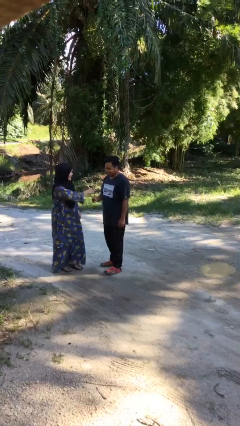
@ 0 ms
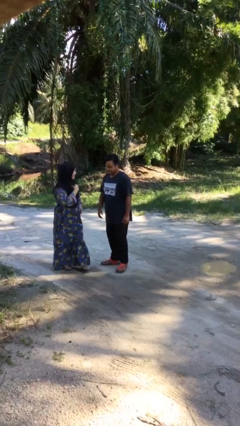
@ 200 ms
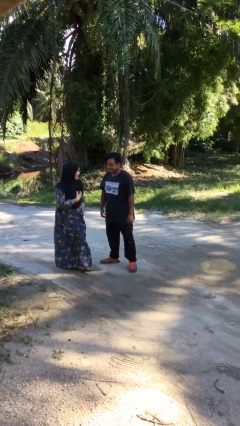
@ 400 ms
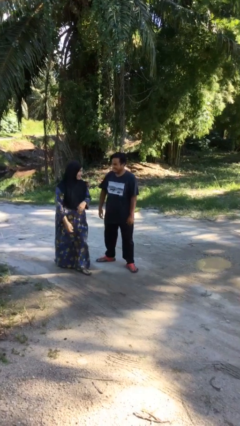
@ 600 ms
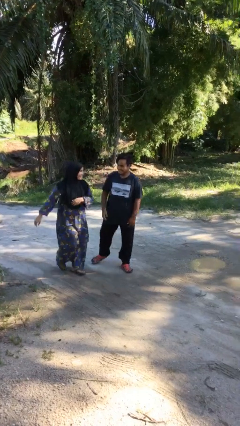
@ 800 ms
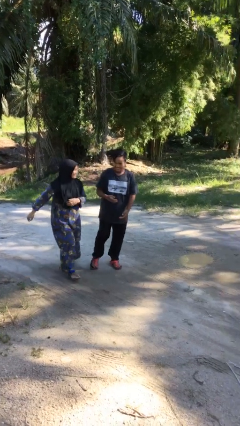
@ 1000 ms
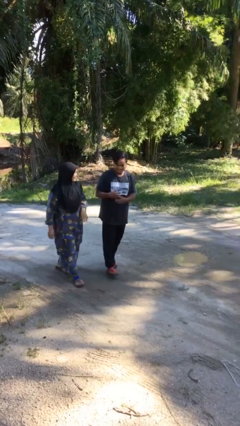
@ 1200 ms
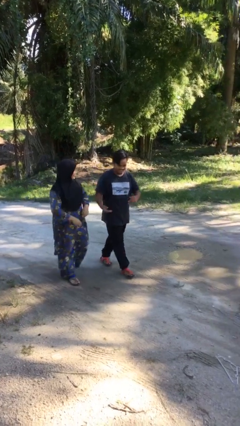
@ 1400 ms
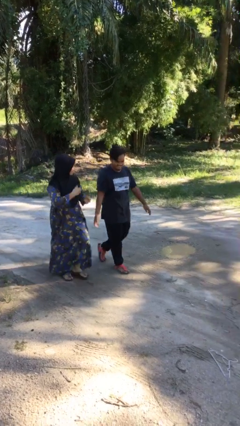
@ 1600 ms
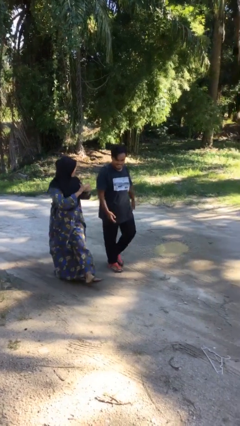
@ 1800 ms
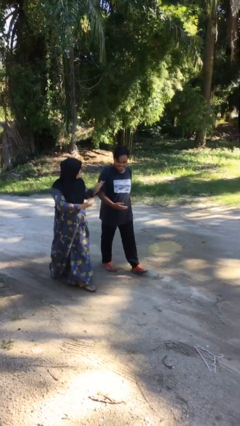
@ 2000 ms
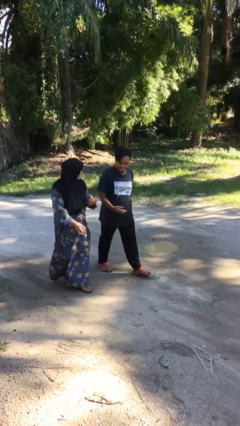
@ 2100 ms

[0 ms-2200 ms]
person talks to person

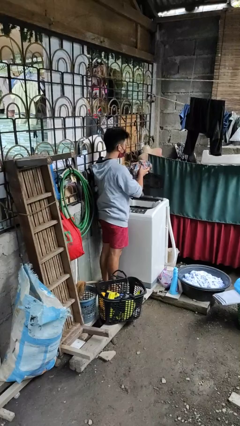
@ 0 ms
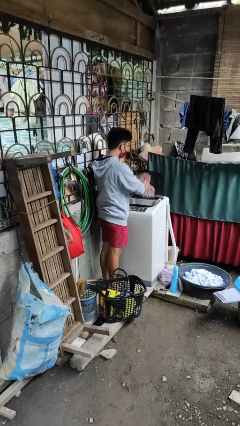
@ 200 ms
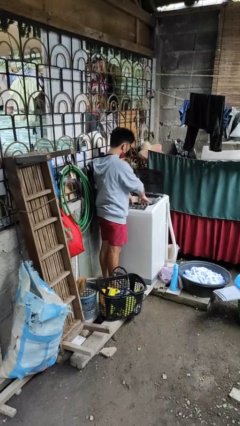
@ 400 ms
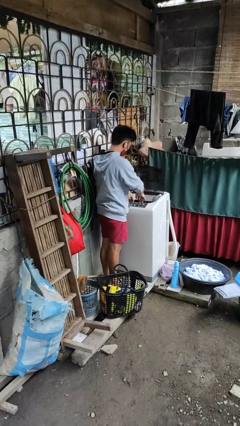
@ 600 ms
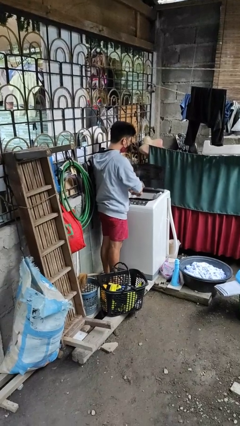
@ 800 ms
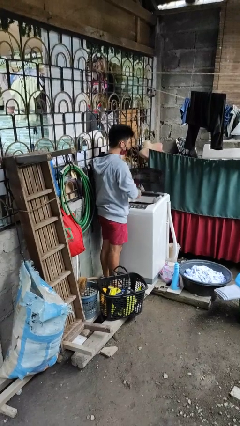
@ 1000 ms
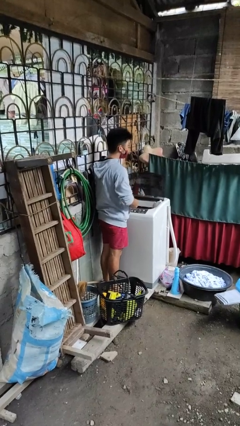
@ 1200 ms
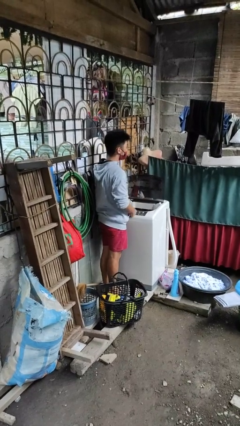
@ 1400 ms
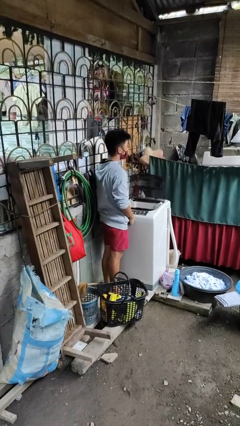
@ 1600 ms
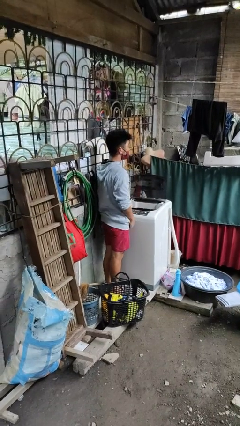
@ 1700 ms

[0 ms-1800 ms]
person loads dryer

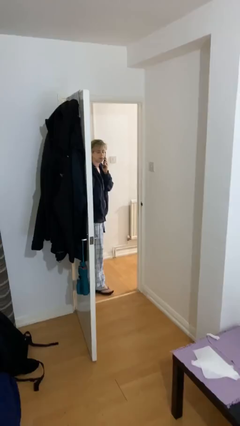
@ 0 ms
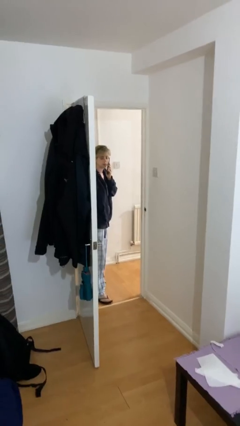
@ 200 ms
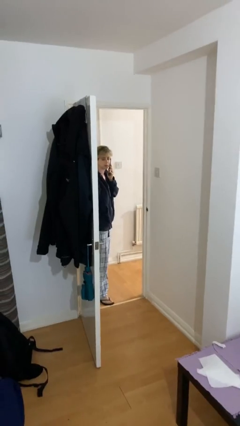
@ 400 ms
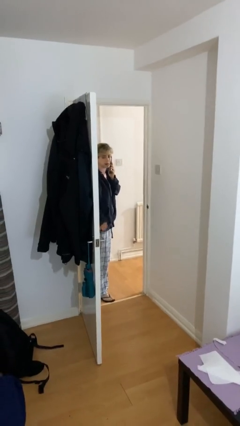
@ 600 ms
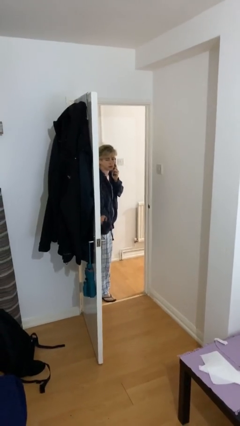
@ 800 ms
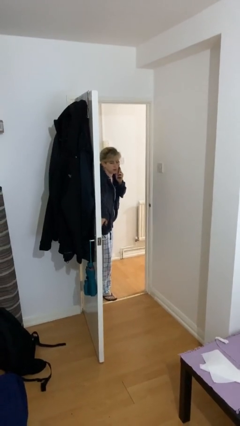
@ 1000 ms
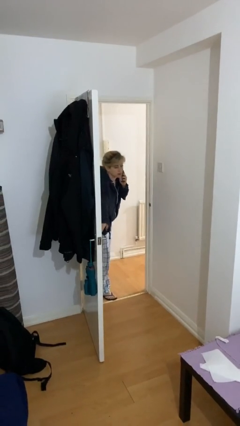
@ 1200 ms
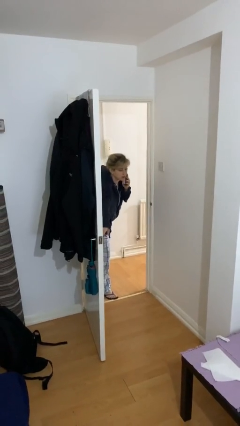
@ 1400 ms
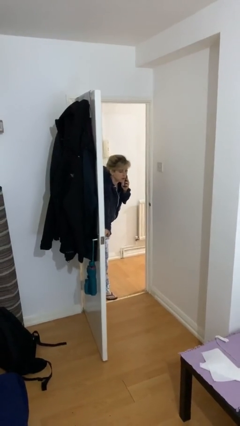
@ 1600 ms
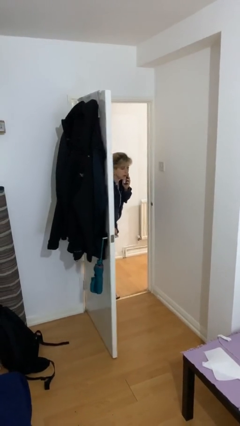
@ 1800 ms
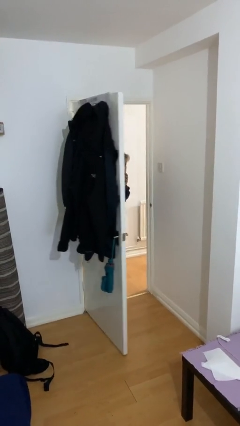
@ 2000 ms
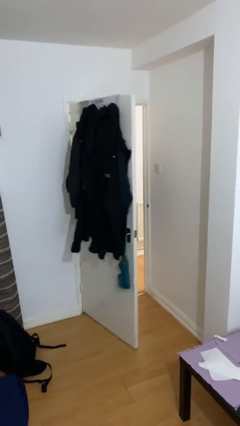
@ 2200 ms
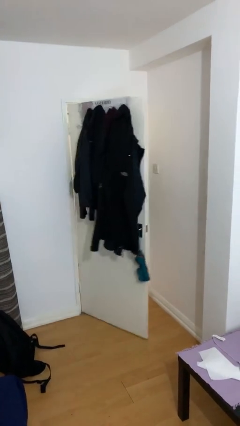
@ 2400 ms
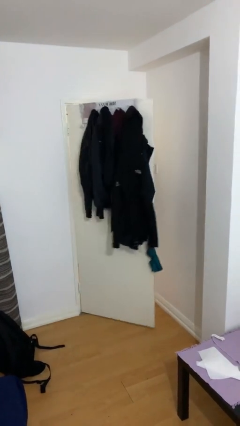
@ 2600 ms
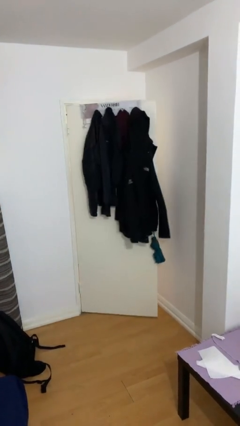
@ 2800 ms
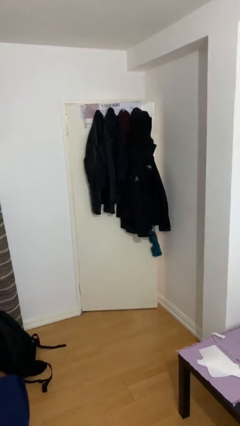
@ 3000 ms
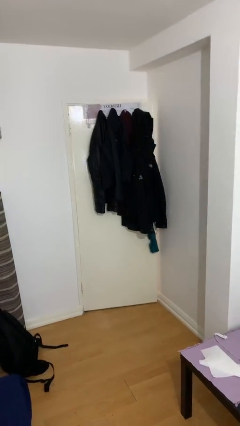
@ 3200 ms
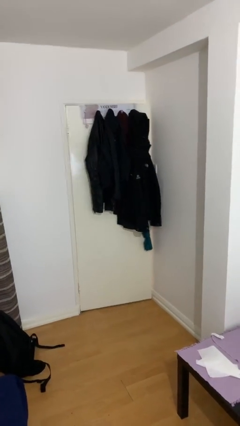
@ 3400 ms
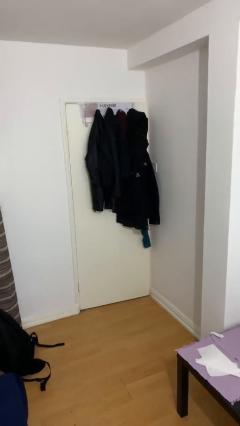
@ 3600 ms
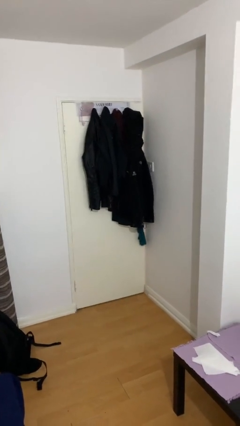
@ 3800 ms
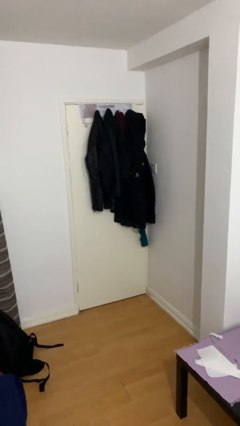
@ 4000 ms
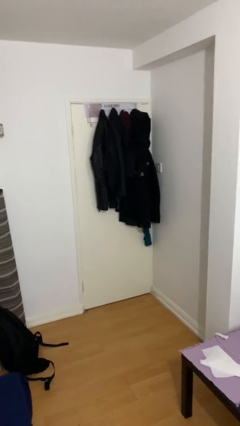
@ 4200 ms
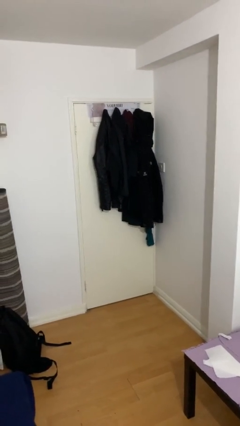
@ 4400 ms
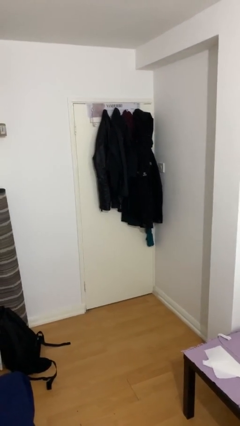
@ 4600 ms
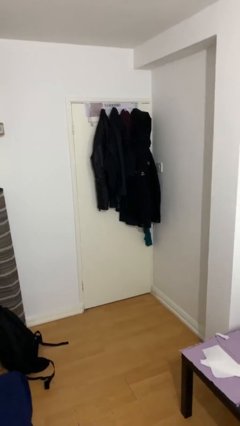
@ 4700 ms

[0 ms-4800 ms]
person closes facility door

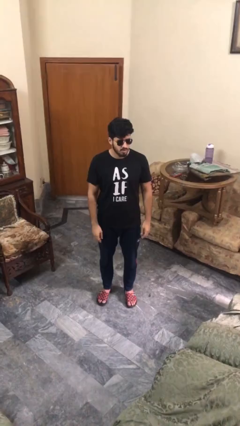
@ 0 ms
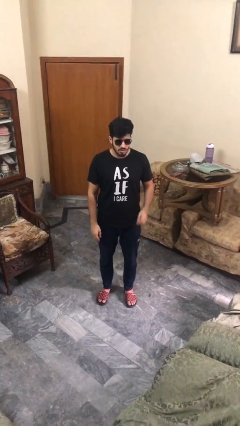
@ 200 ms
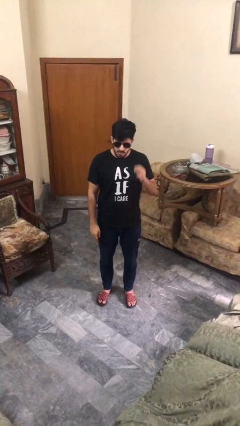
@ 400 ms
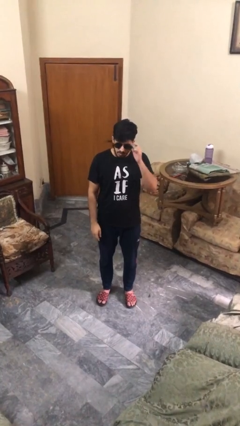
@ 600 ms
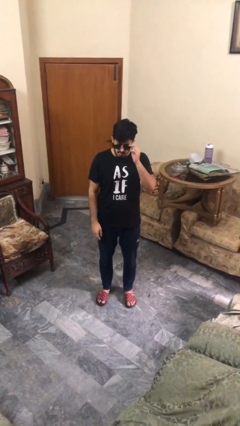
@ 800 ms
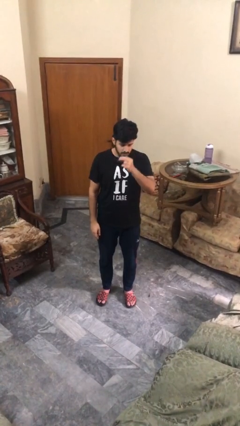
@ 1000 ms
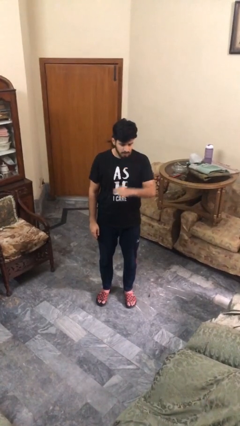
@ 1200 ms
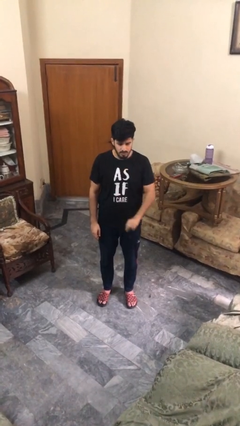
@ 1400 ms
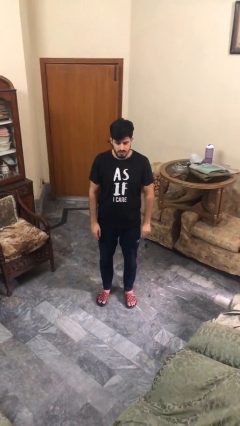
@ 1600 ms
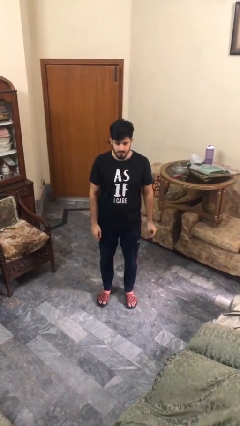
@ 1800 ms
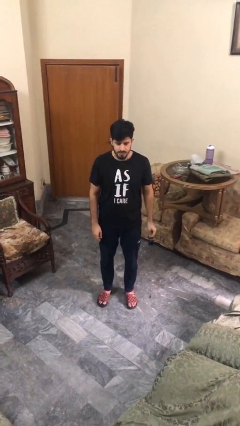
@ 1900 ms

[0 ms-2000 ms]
person takes off sunglasses

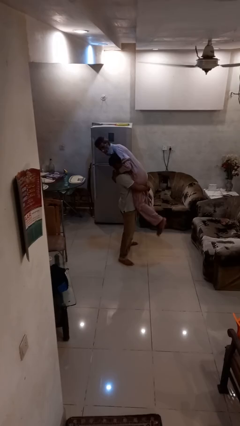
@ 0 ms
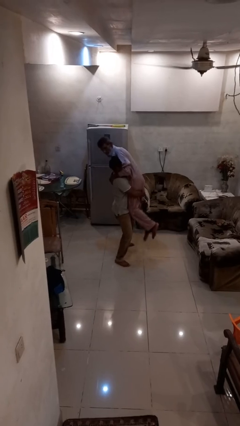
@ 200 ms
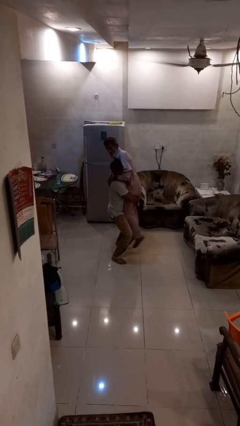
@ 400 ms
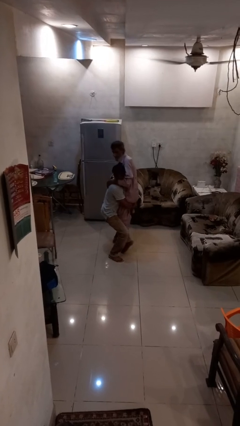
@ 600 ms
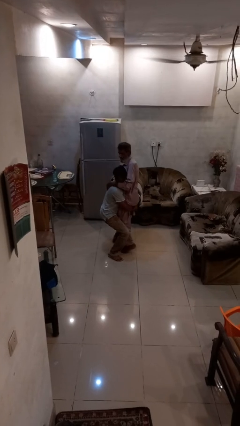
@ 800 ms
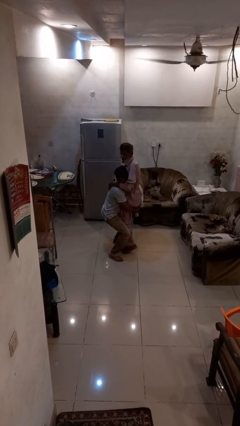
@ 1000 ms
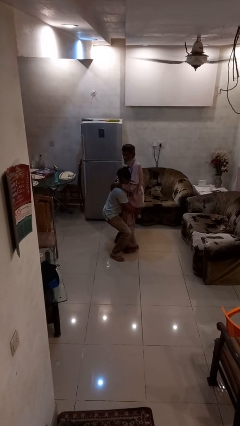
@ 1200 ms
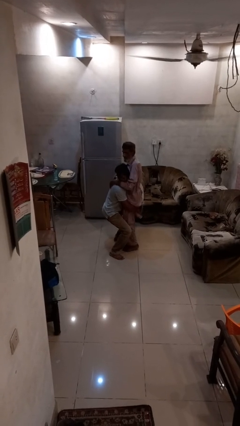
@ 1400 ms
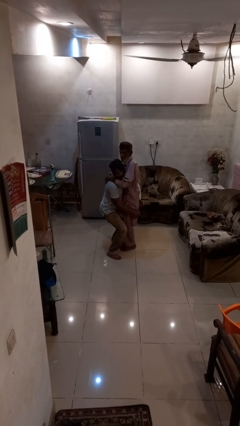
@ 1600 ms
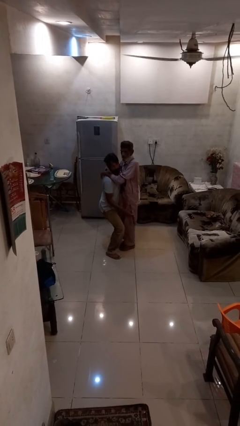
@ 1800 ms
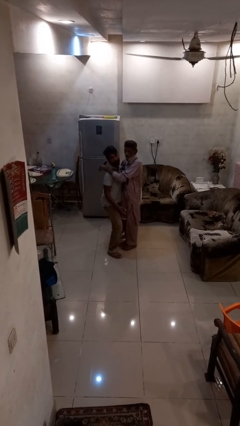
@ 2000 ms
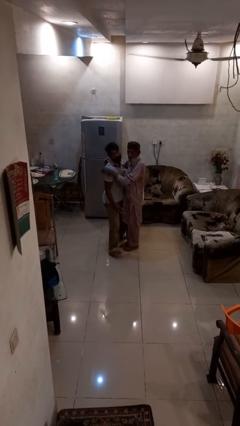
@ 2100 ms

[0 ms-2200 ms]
person puts down person

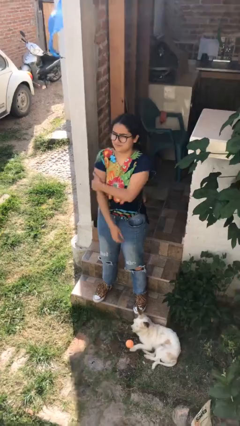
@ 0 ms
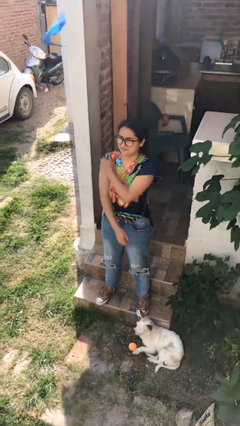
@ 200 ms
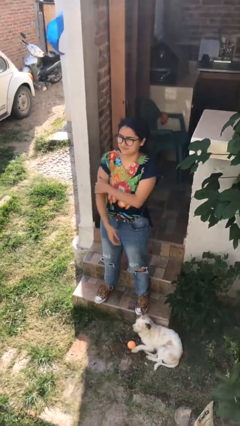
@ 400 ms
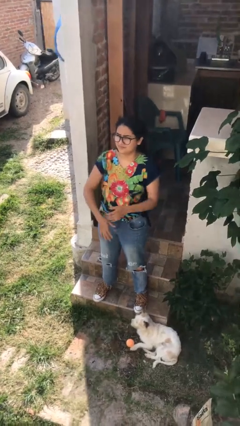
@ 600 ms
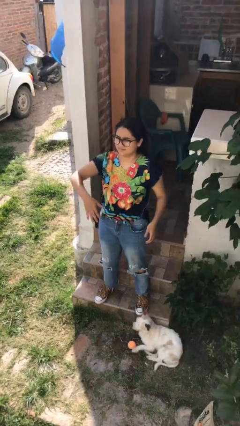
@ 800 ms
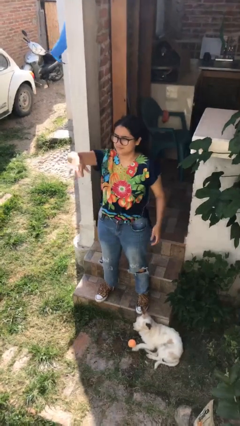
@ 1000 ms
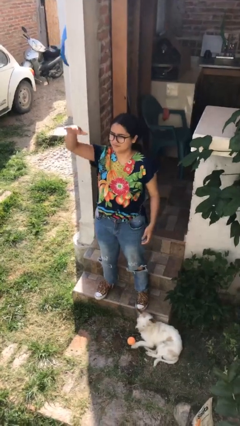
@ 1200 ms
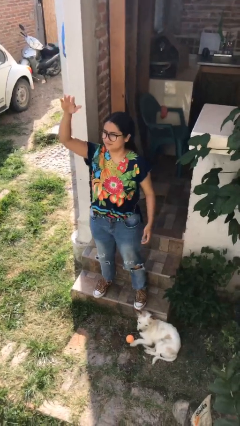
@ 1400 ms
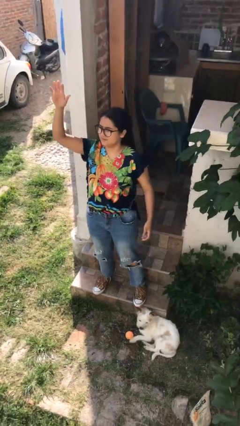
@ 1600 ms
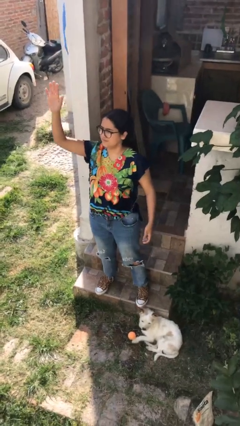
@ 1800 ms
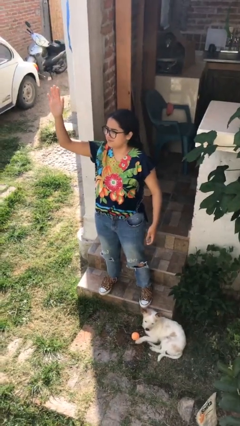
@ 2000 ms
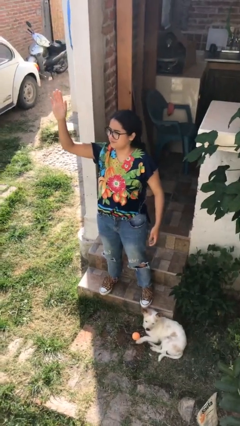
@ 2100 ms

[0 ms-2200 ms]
person gestures swipe up

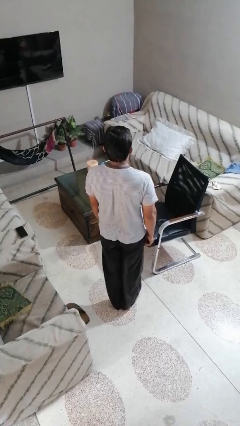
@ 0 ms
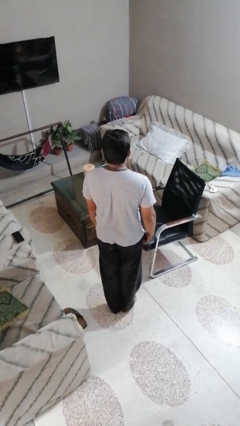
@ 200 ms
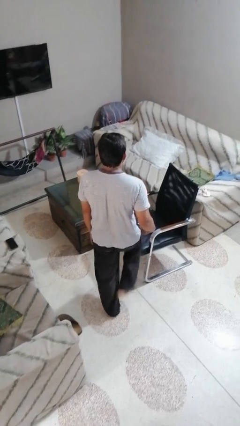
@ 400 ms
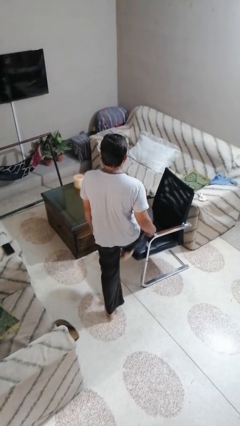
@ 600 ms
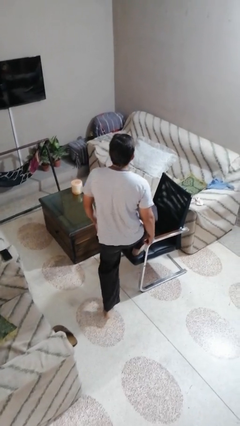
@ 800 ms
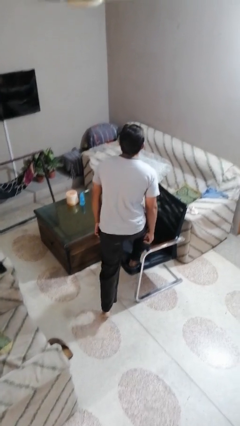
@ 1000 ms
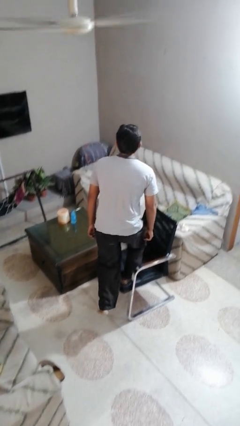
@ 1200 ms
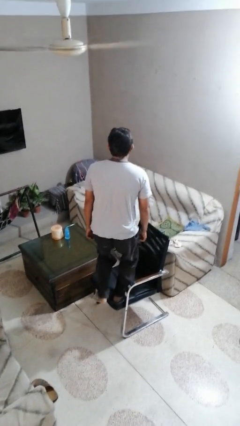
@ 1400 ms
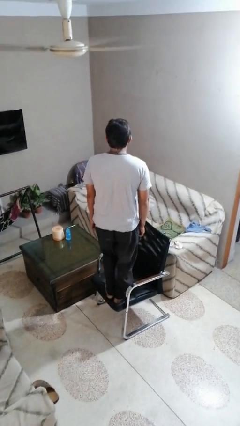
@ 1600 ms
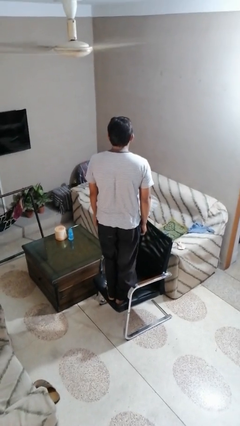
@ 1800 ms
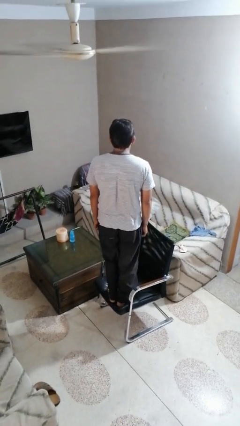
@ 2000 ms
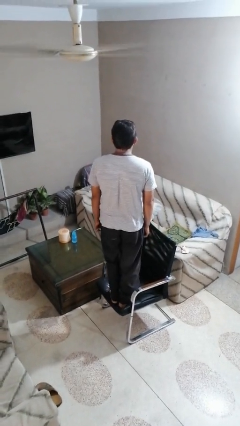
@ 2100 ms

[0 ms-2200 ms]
person climbs on chair
